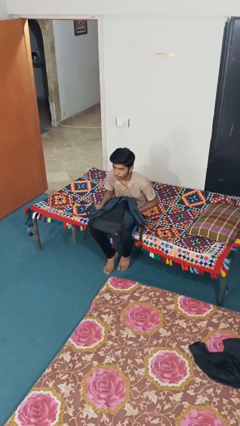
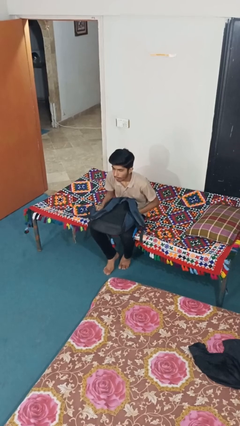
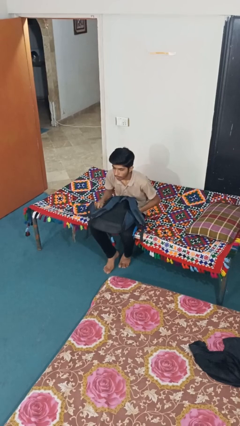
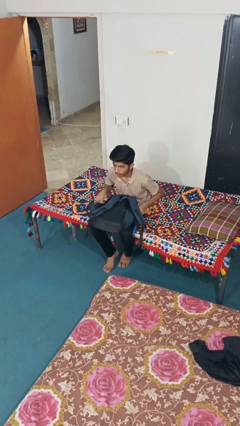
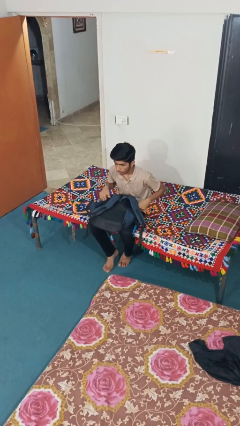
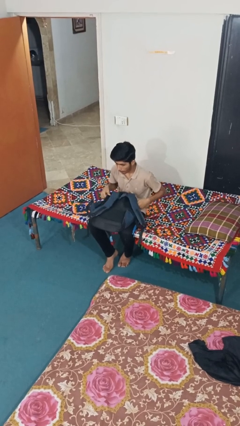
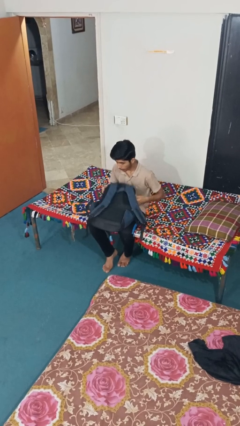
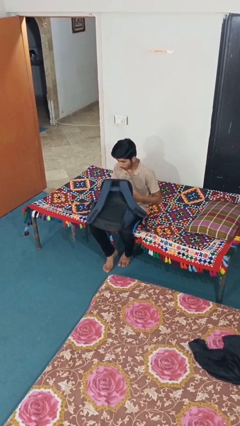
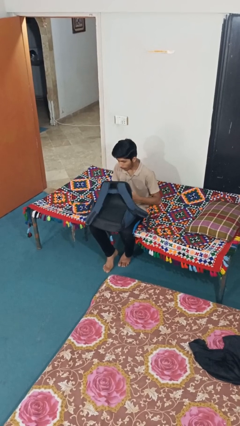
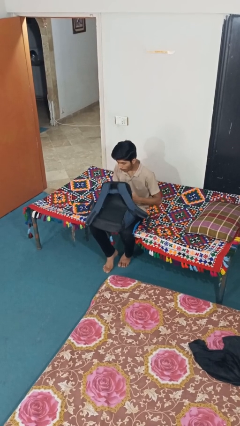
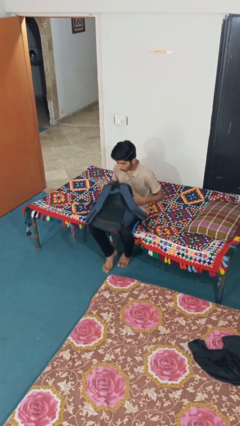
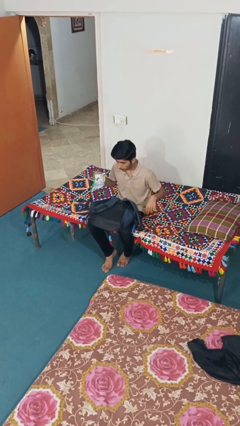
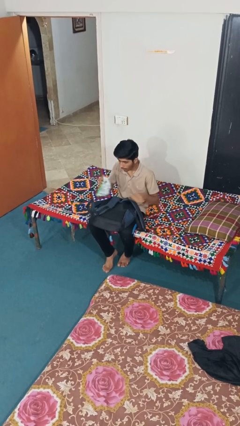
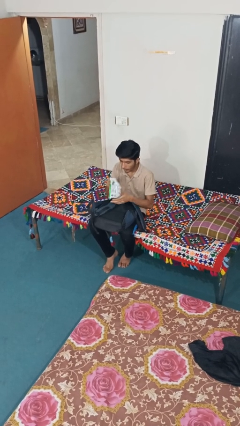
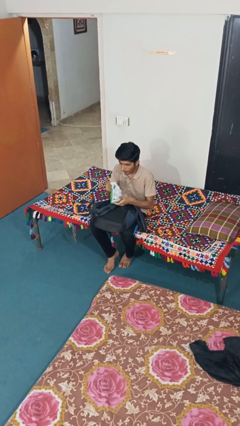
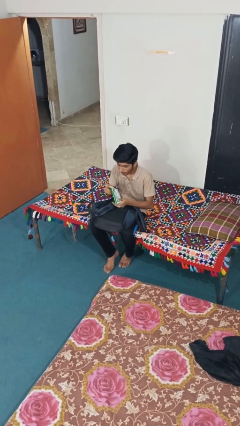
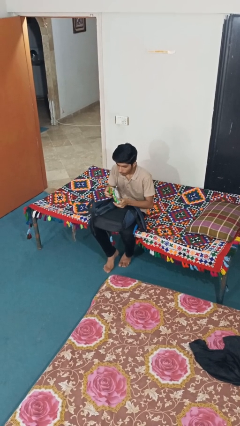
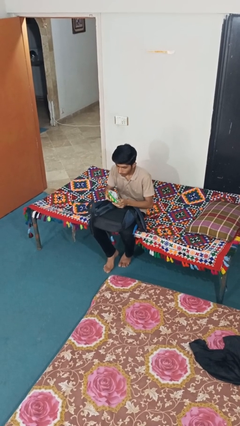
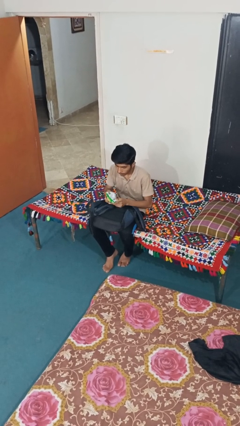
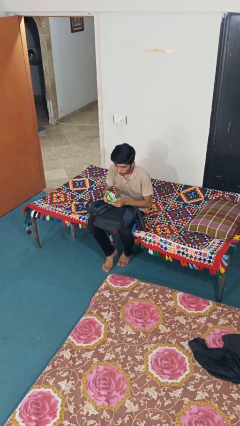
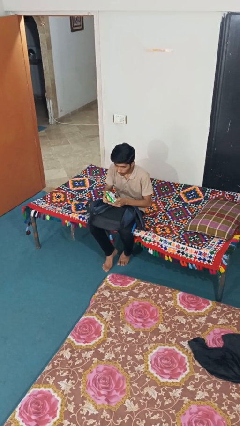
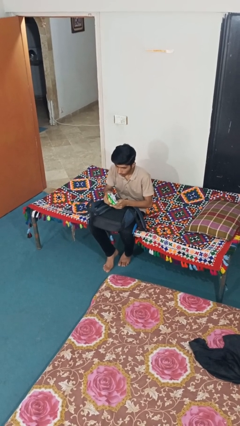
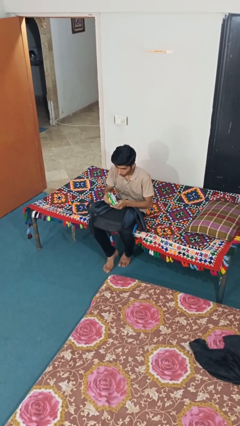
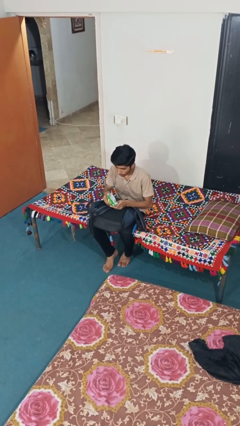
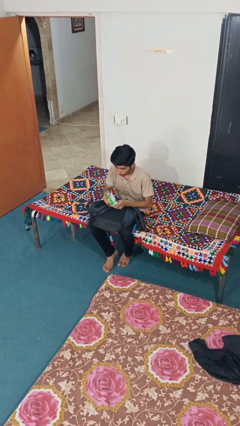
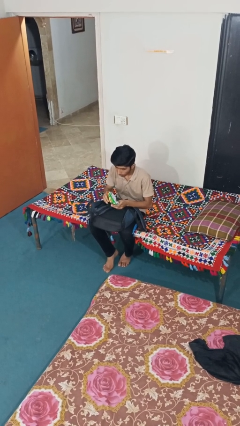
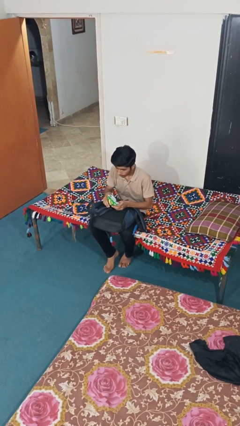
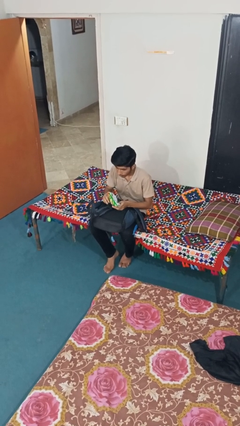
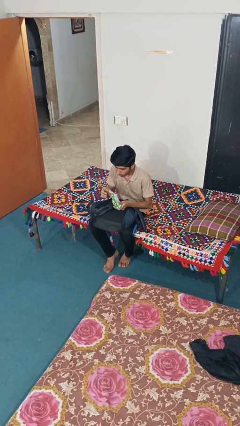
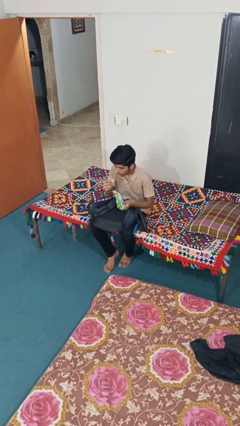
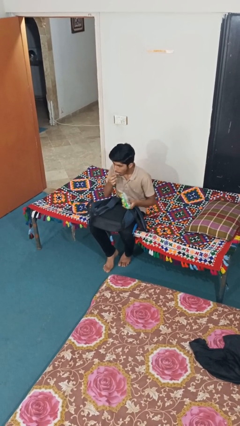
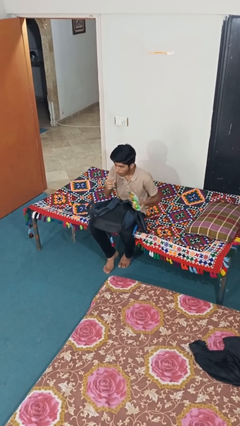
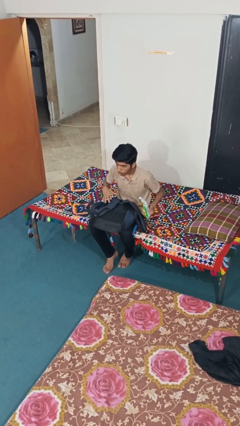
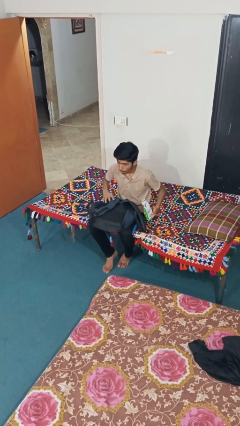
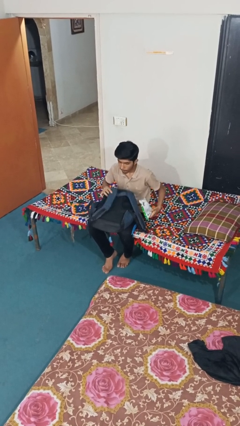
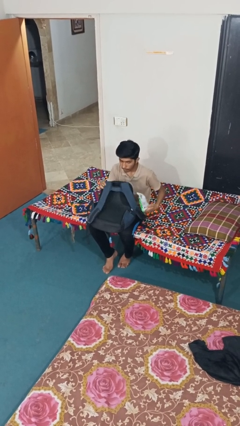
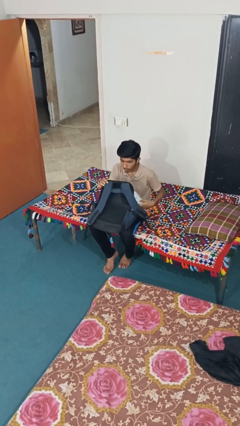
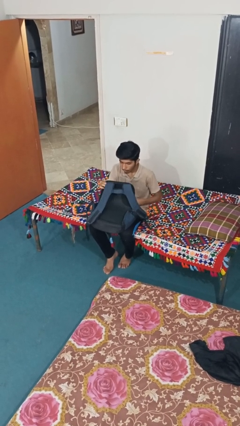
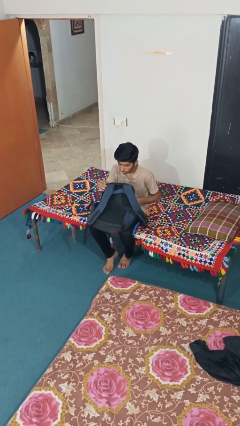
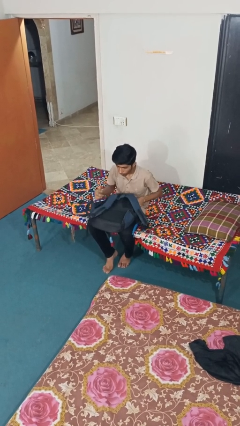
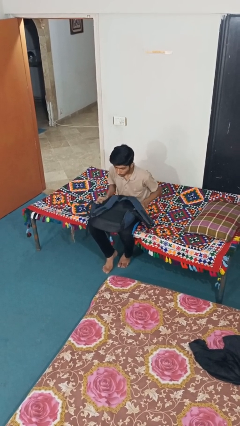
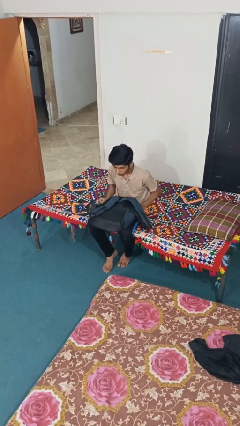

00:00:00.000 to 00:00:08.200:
person eats snack from bag

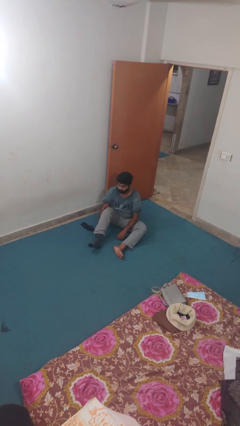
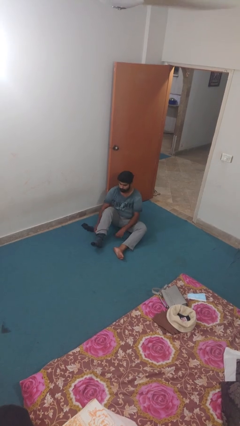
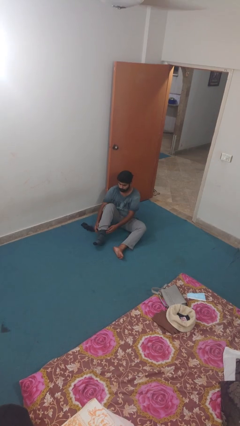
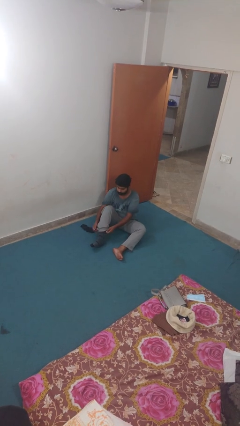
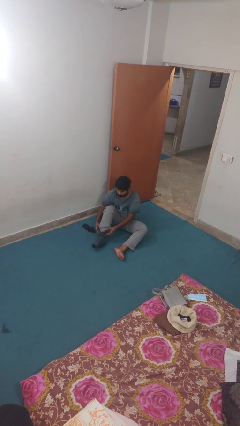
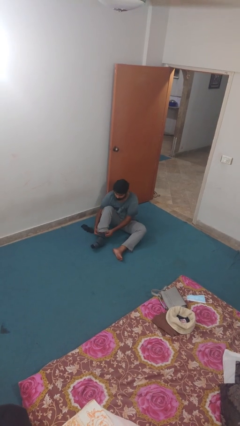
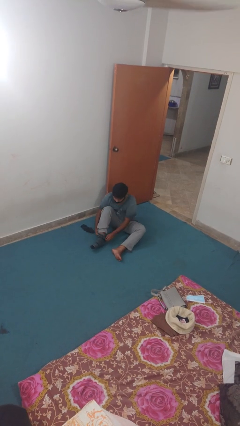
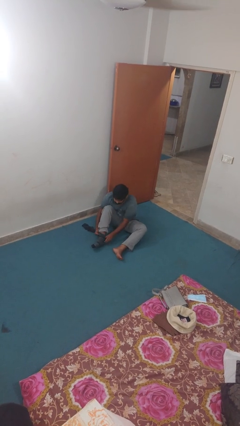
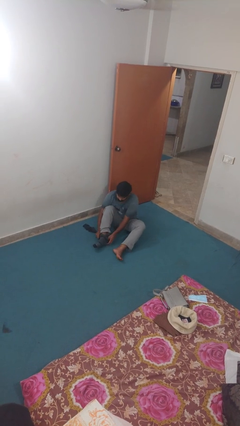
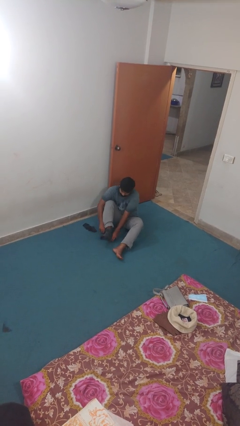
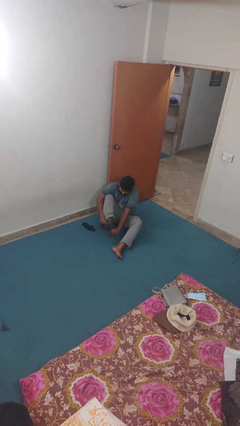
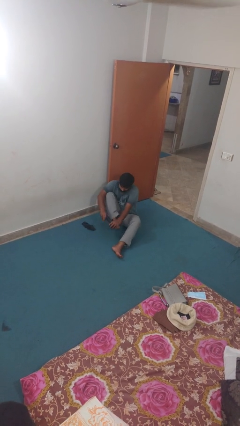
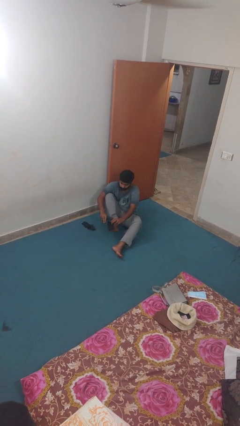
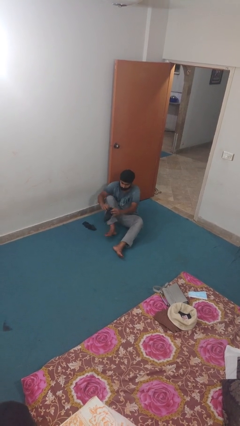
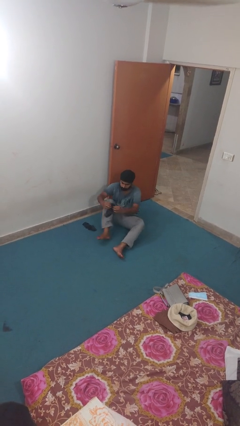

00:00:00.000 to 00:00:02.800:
person takes off socks

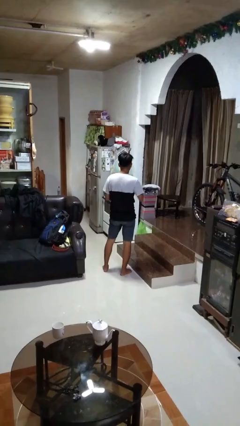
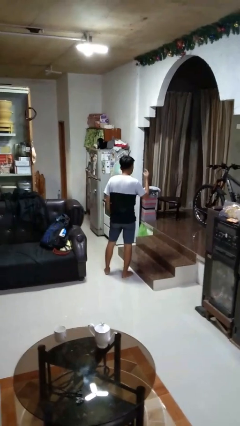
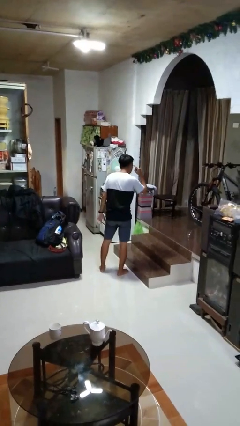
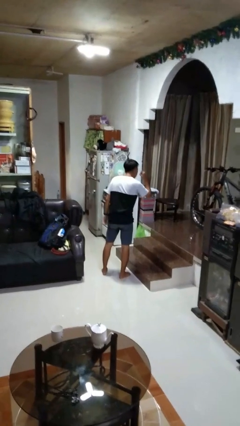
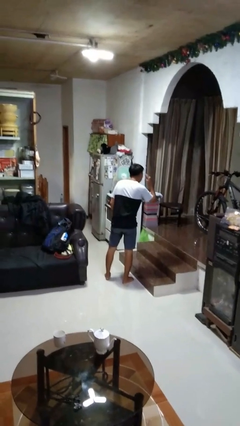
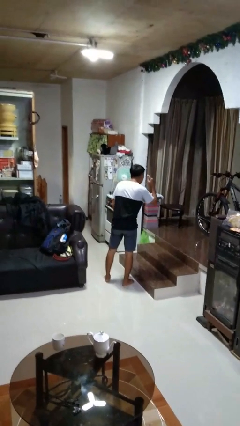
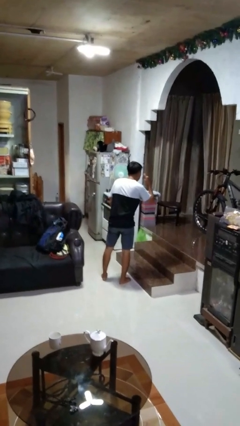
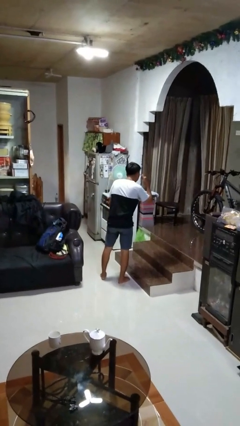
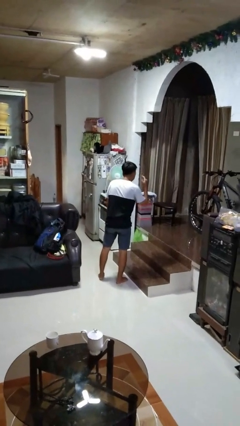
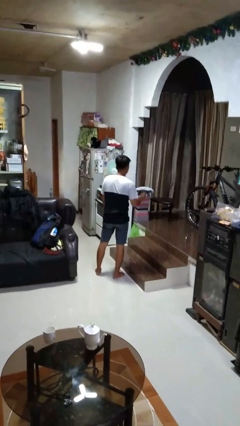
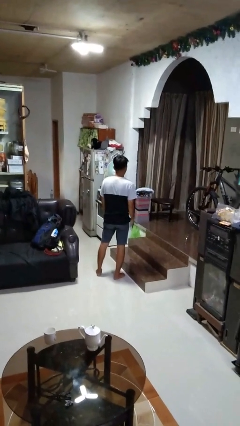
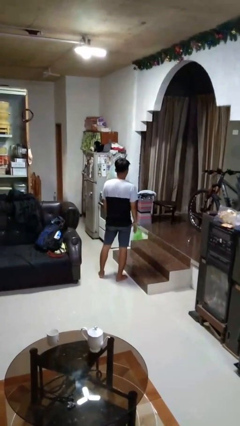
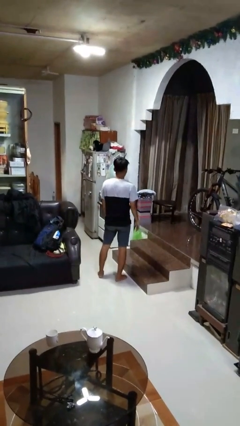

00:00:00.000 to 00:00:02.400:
person gestures listen closely

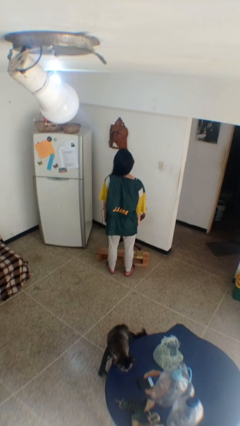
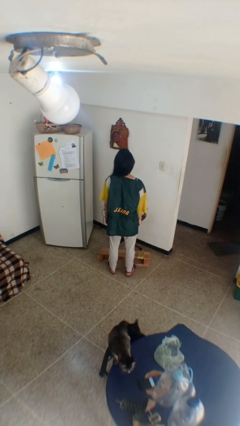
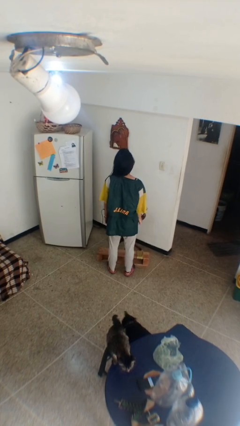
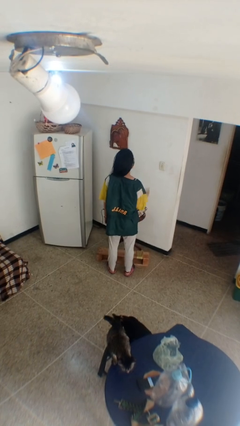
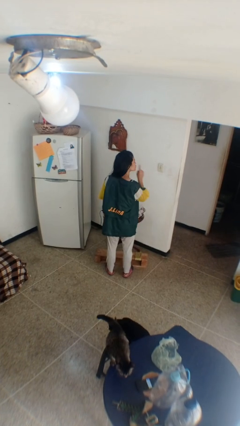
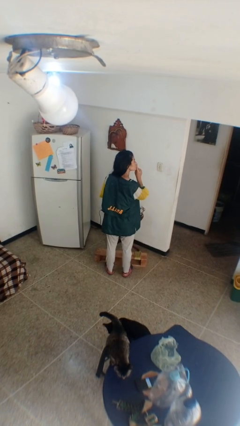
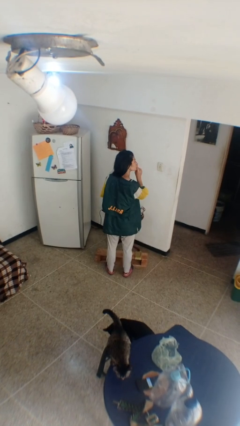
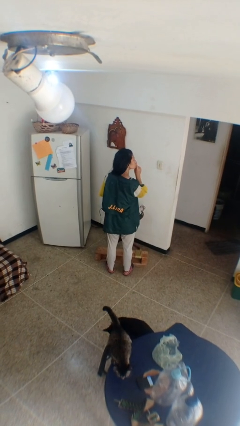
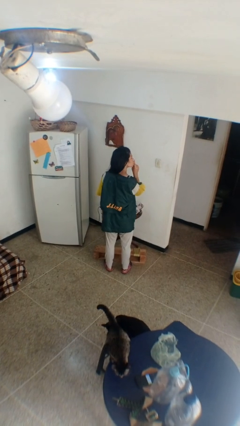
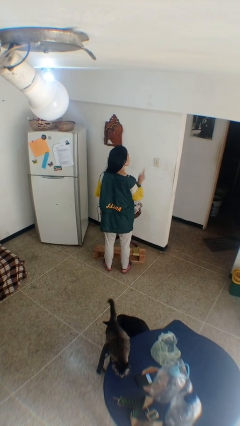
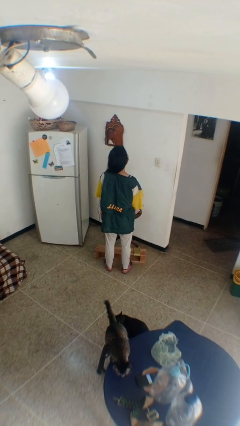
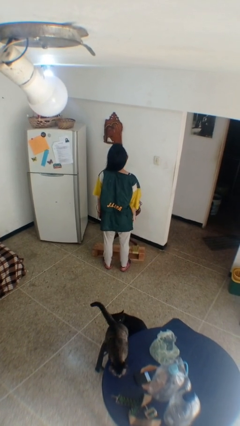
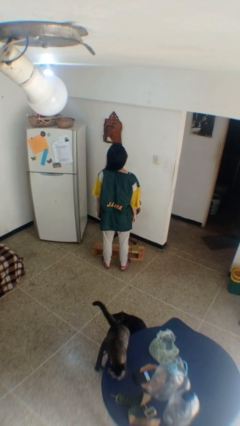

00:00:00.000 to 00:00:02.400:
person gestures be quiet

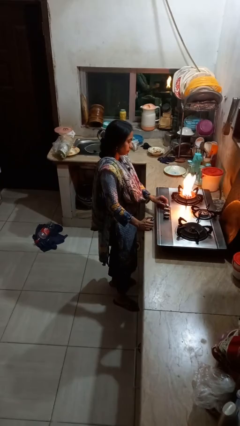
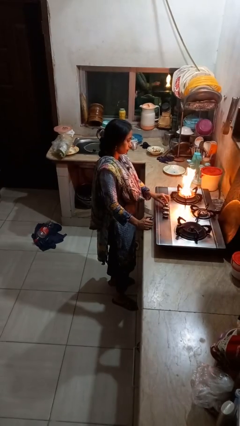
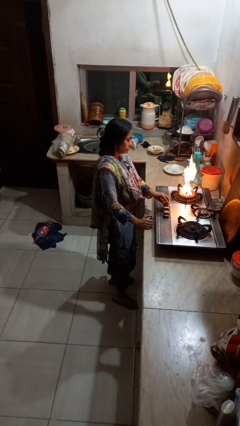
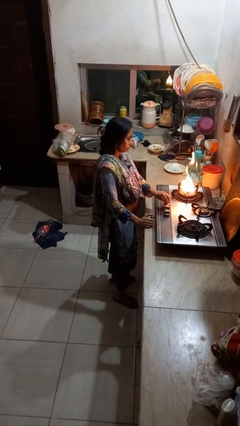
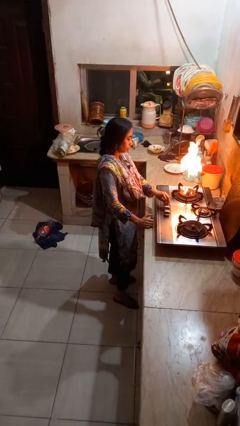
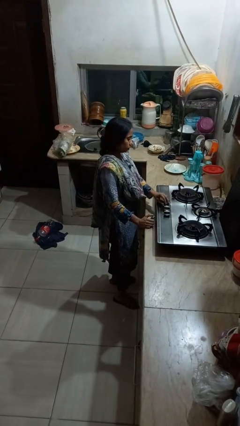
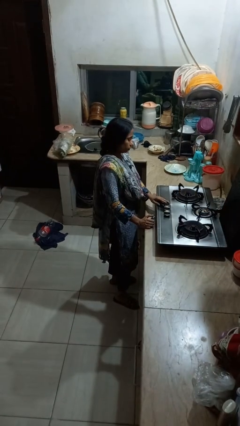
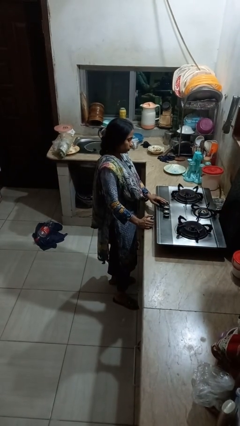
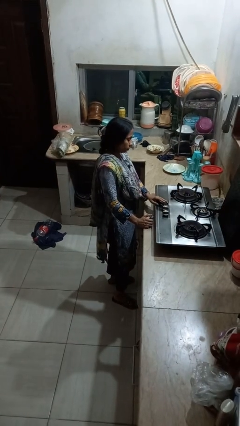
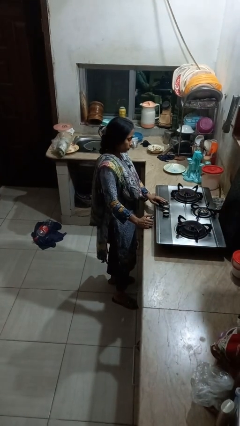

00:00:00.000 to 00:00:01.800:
person turns off stovetop
